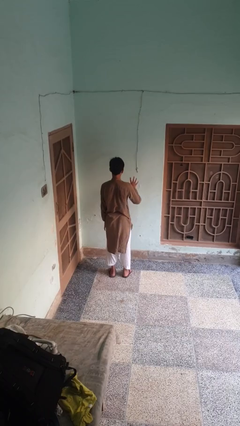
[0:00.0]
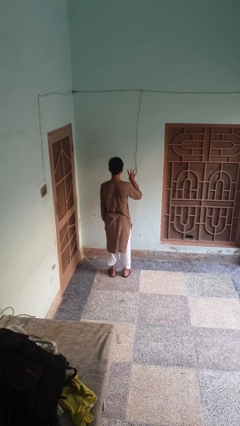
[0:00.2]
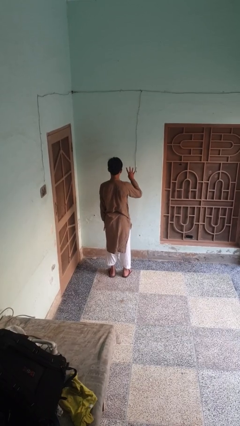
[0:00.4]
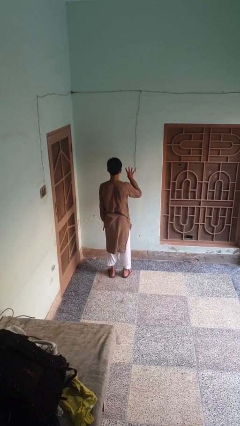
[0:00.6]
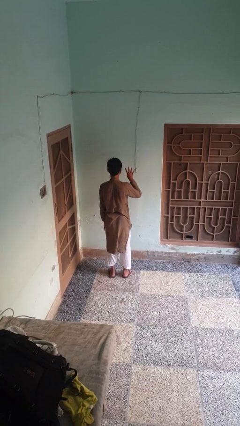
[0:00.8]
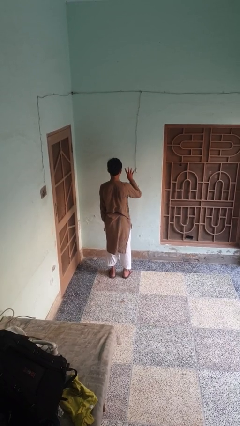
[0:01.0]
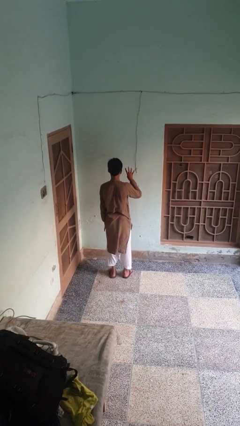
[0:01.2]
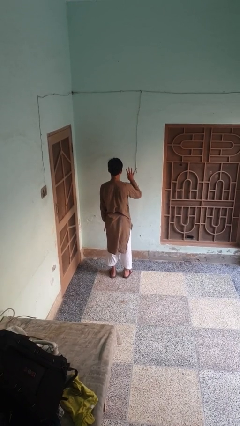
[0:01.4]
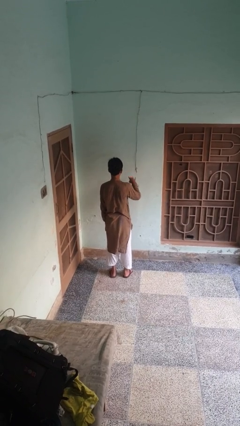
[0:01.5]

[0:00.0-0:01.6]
person gestures number four

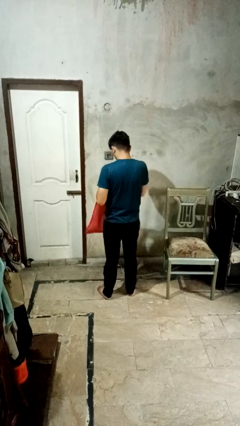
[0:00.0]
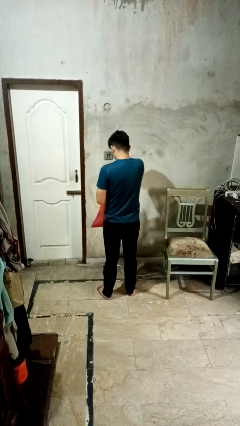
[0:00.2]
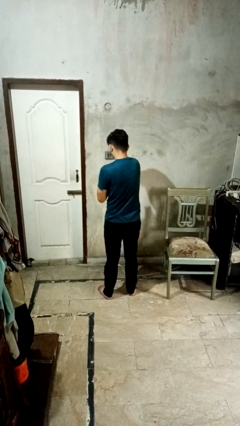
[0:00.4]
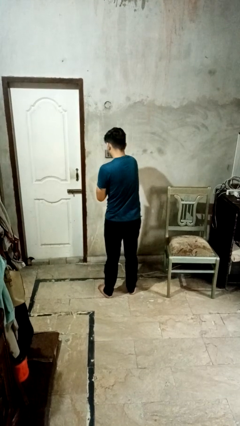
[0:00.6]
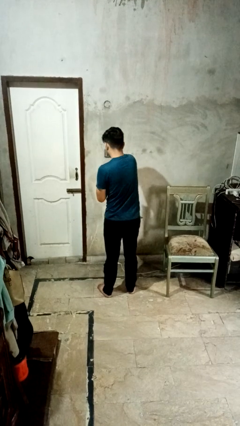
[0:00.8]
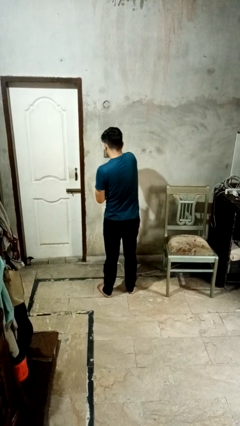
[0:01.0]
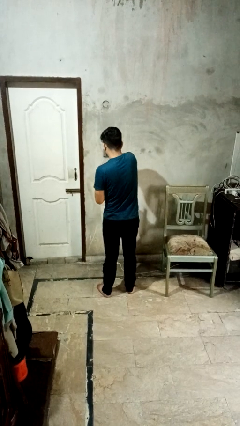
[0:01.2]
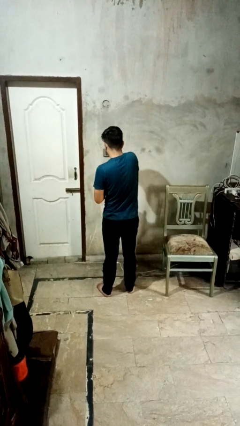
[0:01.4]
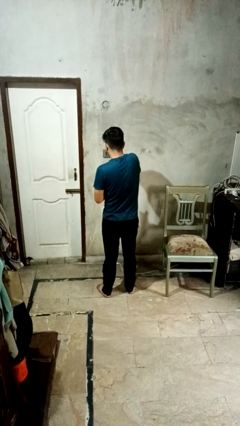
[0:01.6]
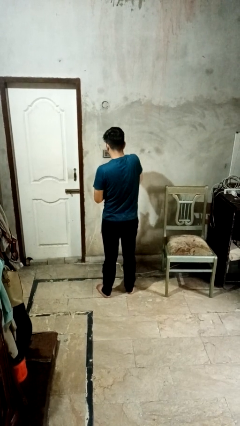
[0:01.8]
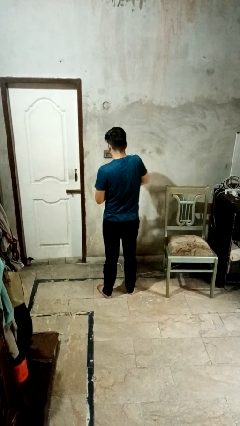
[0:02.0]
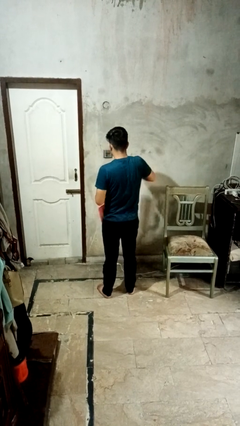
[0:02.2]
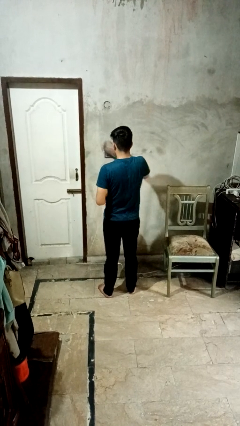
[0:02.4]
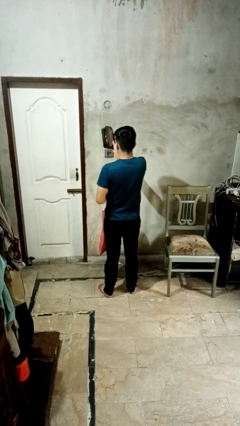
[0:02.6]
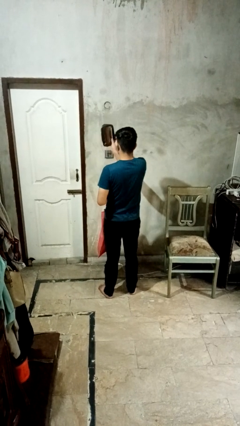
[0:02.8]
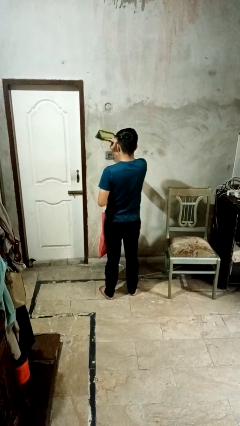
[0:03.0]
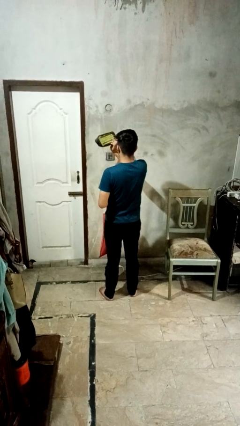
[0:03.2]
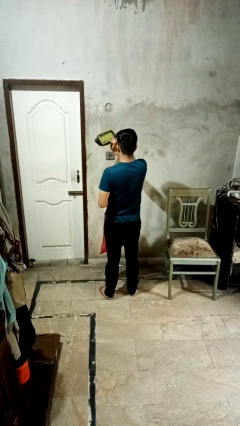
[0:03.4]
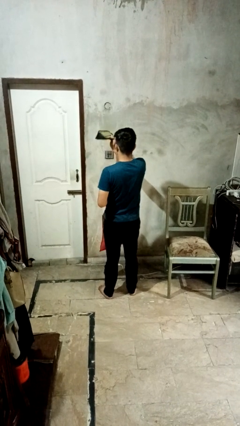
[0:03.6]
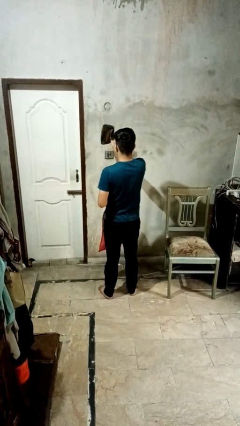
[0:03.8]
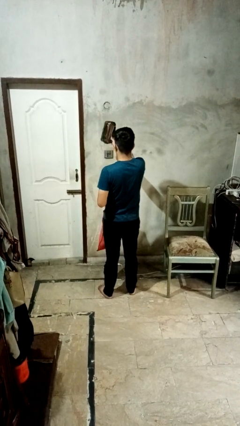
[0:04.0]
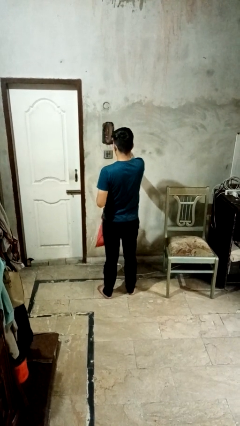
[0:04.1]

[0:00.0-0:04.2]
person takes object from bag

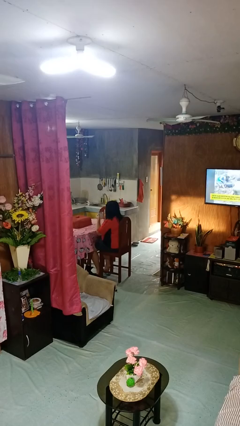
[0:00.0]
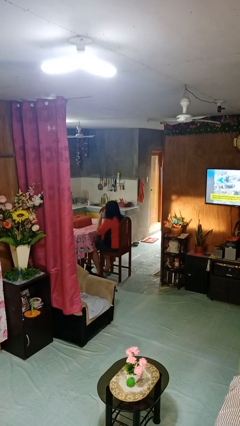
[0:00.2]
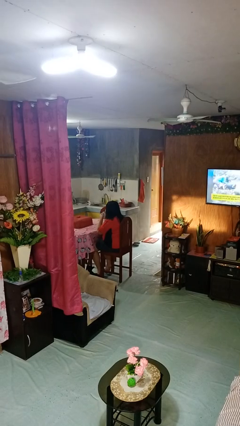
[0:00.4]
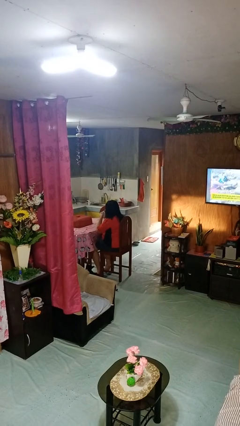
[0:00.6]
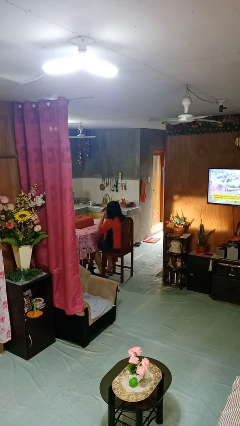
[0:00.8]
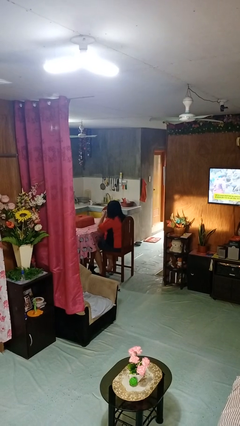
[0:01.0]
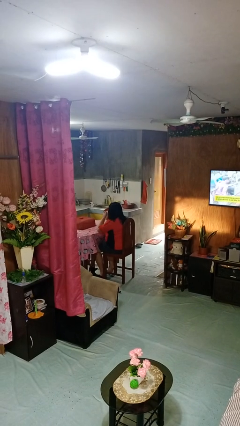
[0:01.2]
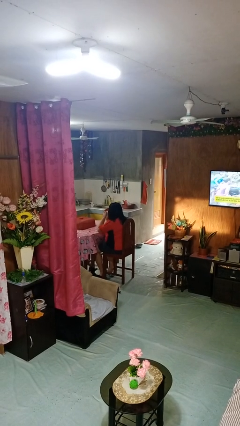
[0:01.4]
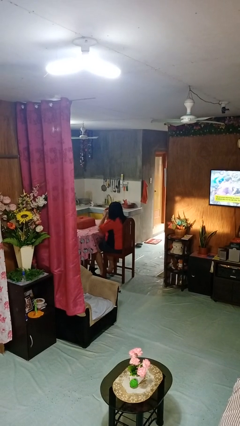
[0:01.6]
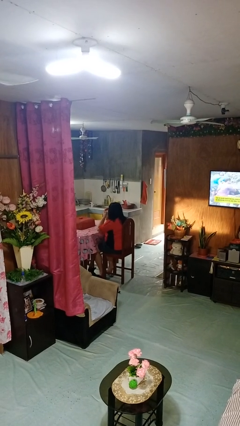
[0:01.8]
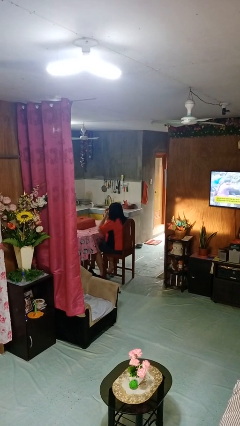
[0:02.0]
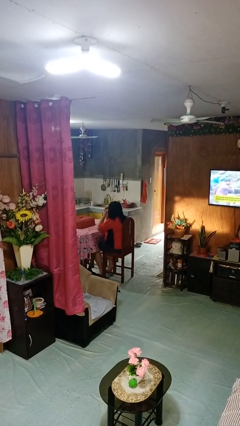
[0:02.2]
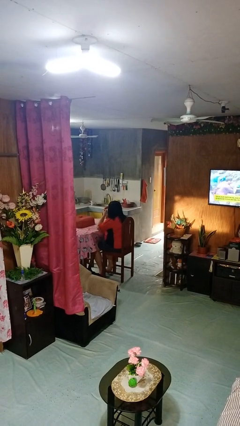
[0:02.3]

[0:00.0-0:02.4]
person drinks from mug

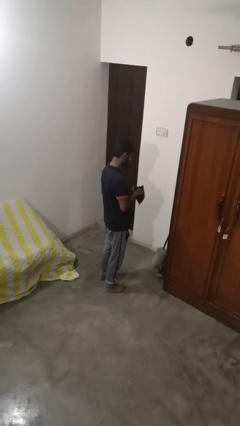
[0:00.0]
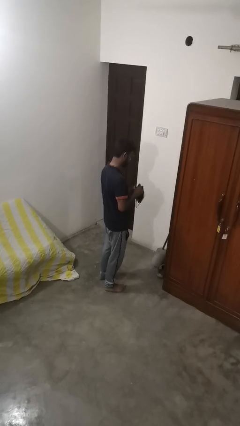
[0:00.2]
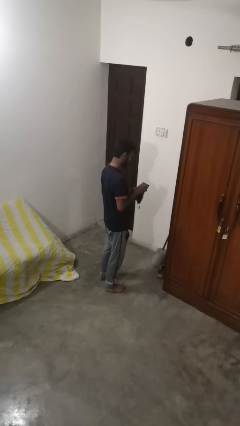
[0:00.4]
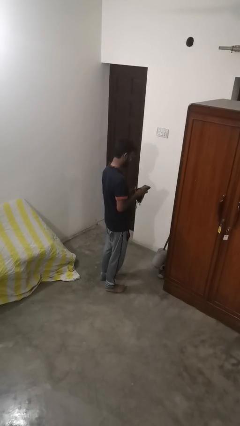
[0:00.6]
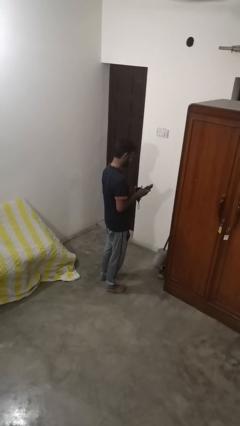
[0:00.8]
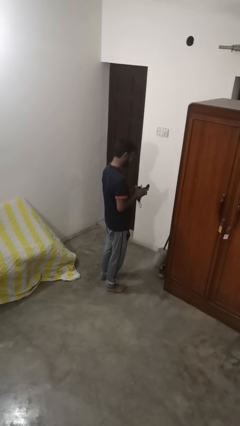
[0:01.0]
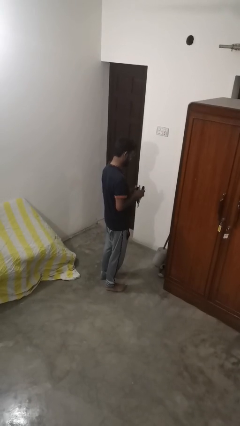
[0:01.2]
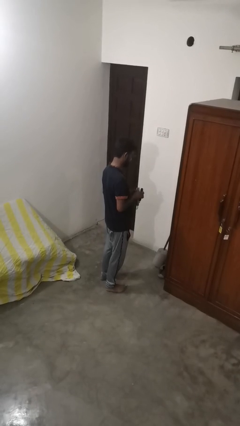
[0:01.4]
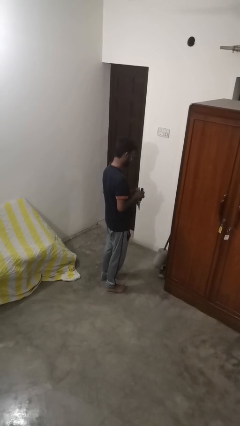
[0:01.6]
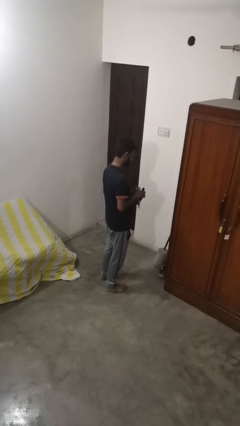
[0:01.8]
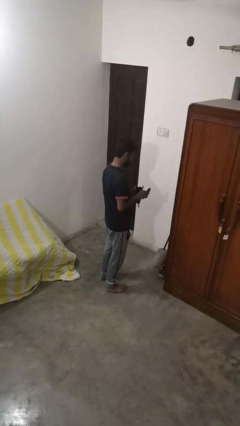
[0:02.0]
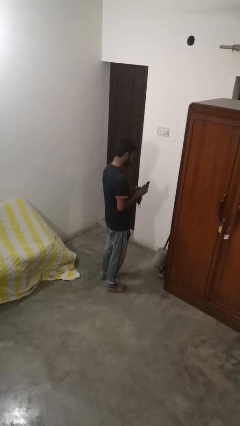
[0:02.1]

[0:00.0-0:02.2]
person takes object from purse

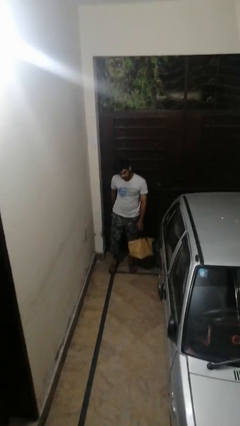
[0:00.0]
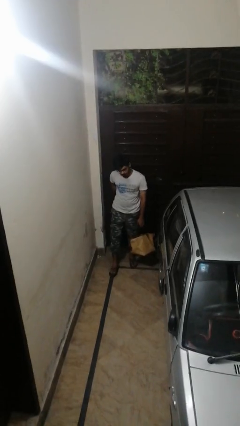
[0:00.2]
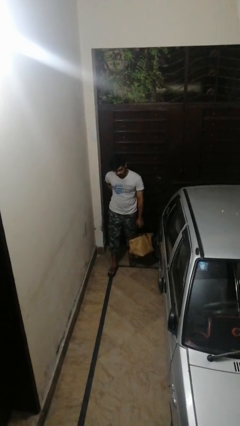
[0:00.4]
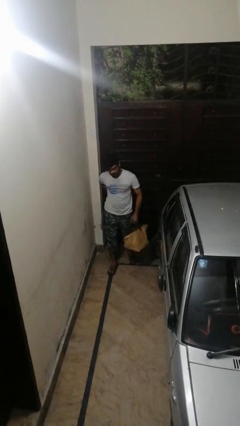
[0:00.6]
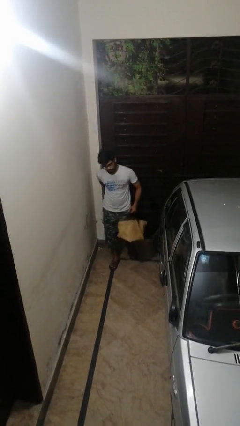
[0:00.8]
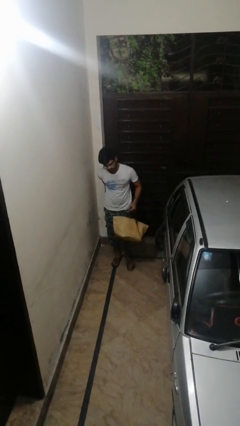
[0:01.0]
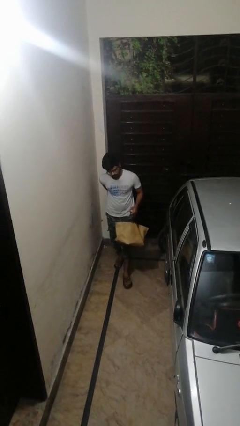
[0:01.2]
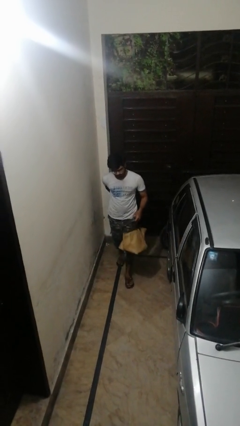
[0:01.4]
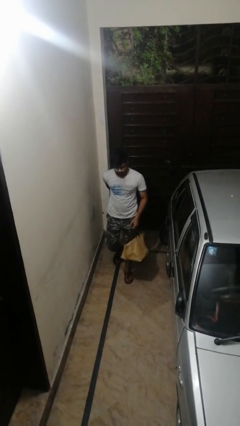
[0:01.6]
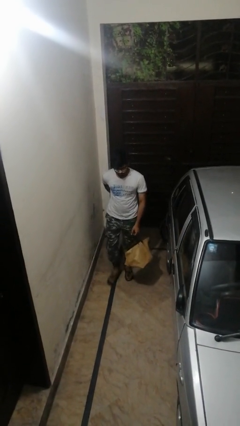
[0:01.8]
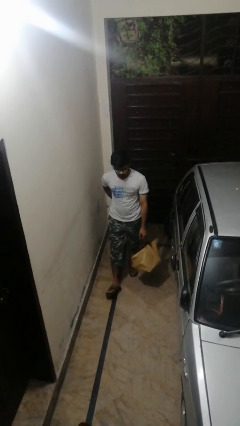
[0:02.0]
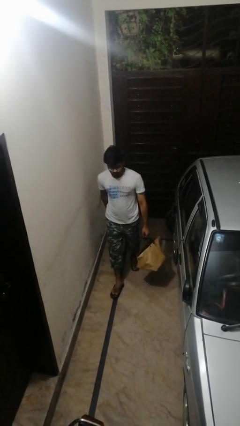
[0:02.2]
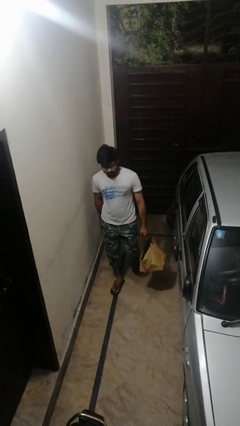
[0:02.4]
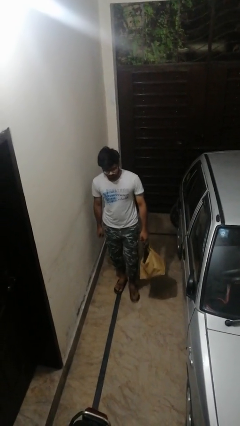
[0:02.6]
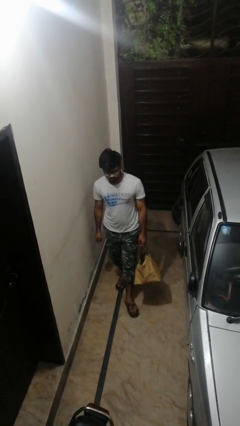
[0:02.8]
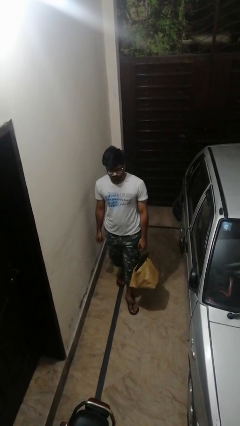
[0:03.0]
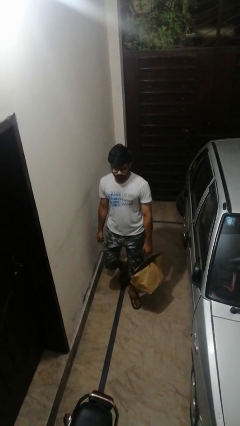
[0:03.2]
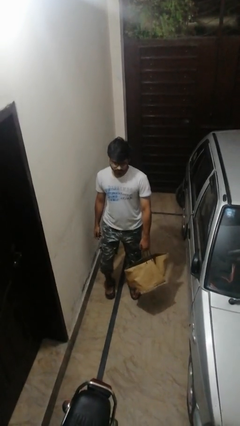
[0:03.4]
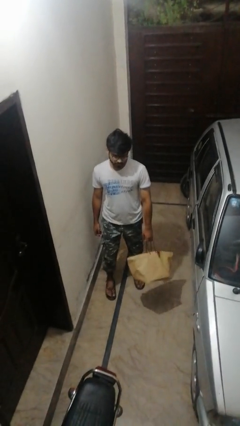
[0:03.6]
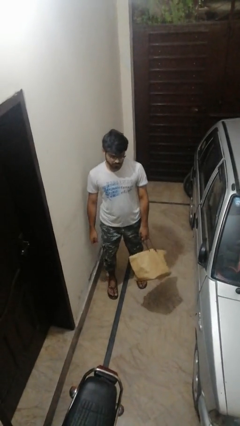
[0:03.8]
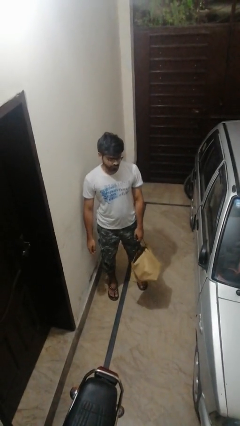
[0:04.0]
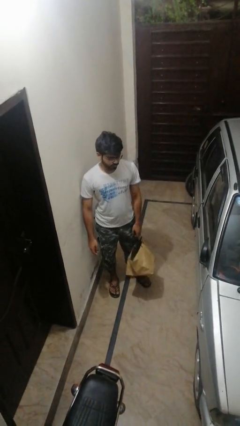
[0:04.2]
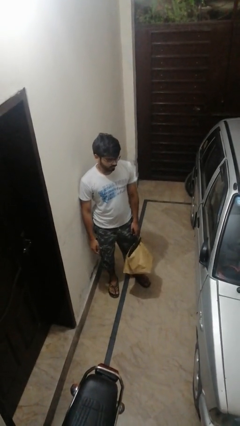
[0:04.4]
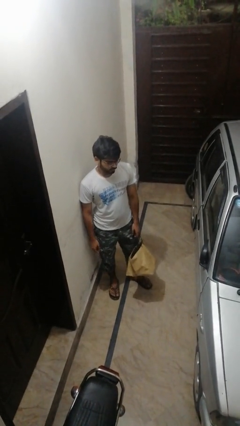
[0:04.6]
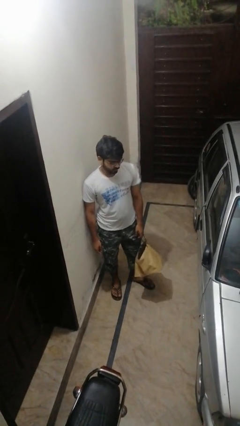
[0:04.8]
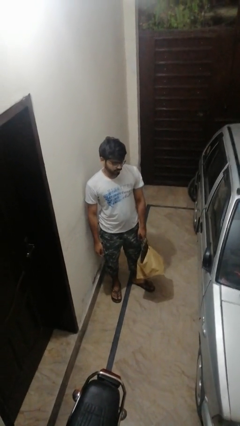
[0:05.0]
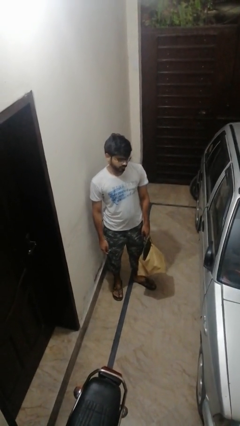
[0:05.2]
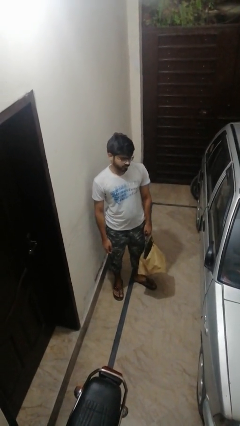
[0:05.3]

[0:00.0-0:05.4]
person carries groceries

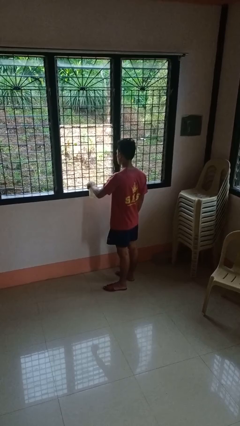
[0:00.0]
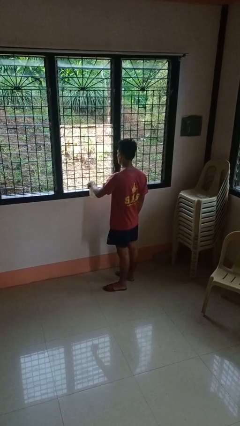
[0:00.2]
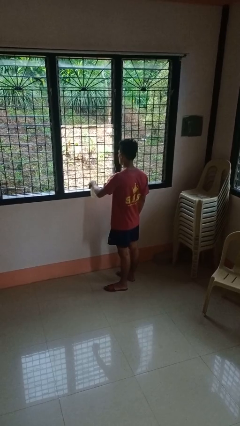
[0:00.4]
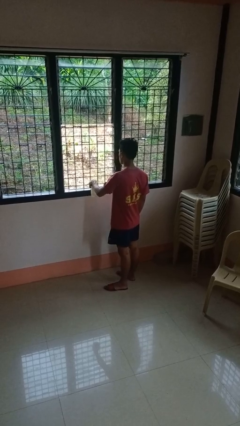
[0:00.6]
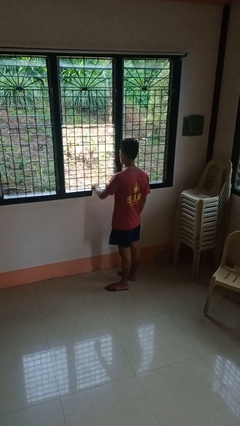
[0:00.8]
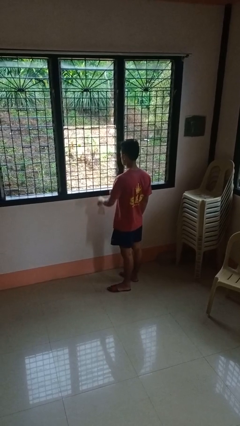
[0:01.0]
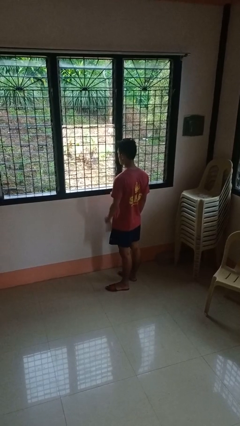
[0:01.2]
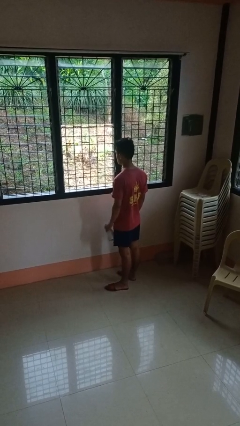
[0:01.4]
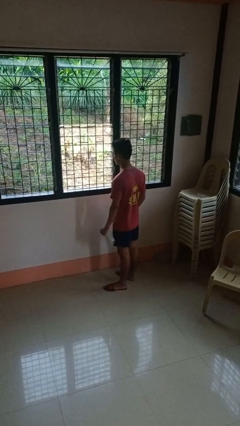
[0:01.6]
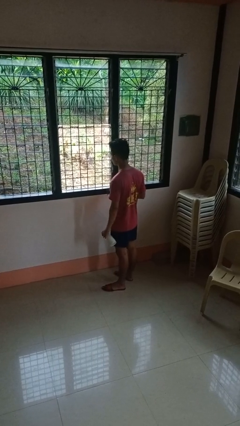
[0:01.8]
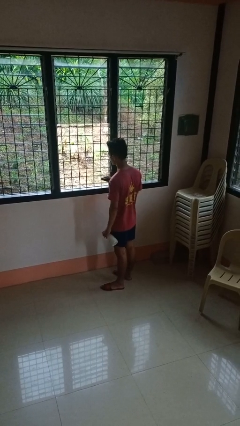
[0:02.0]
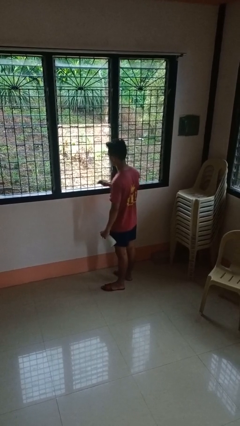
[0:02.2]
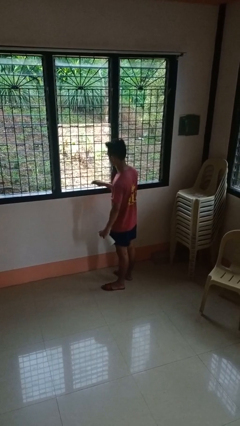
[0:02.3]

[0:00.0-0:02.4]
person sprays from bottle
